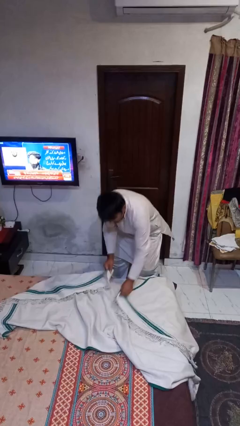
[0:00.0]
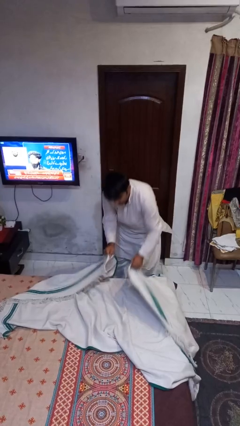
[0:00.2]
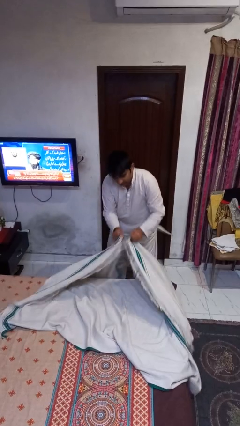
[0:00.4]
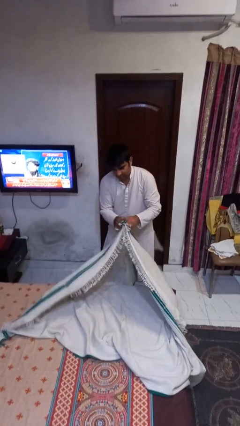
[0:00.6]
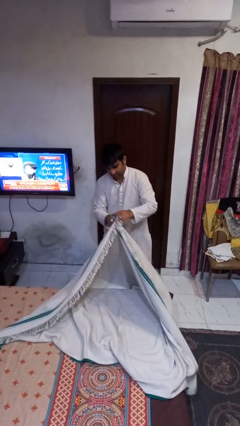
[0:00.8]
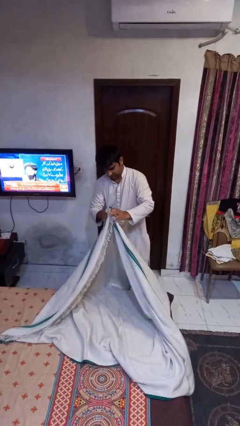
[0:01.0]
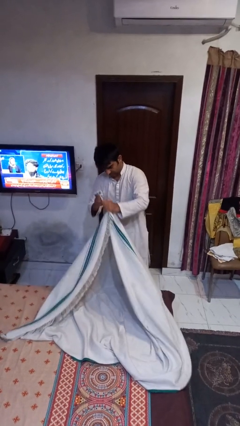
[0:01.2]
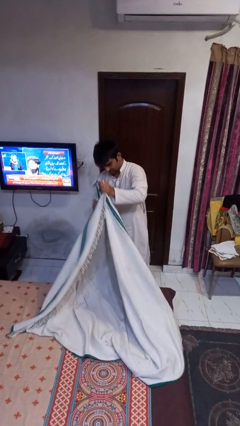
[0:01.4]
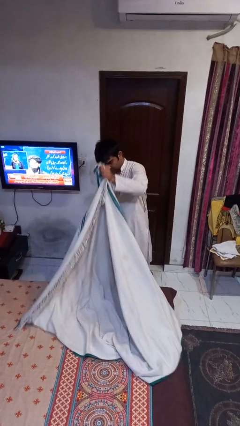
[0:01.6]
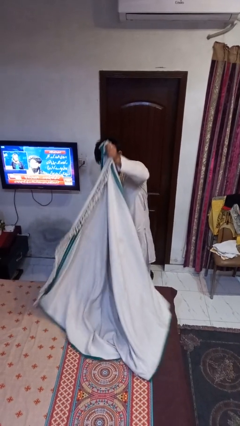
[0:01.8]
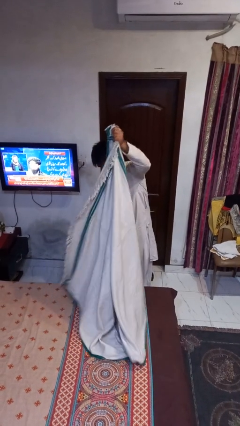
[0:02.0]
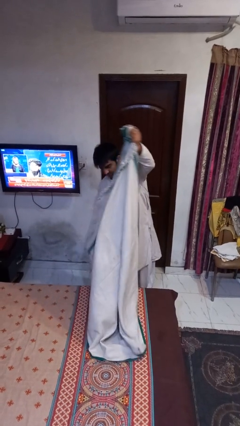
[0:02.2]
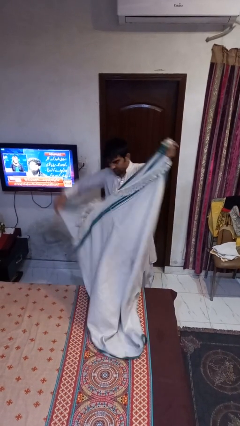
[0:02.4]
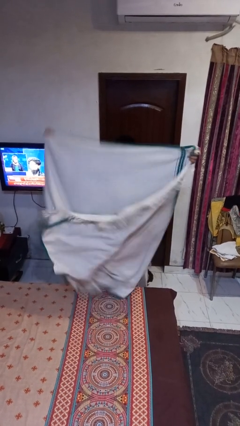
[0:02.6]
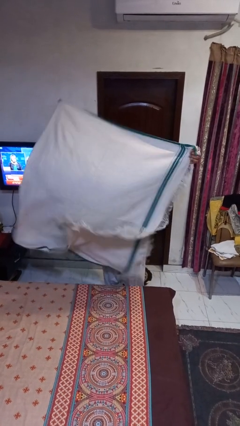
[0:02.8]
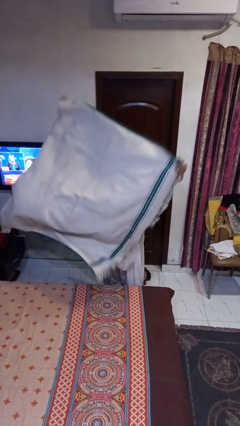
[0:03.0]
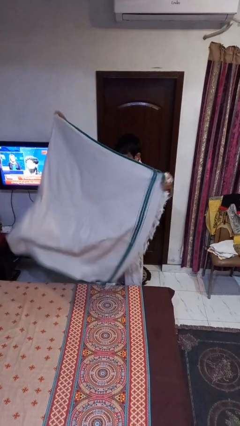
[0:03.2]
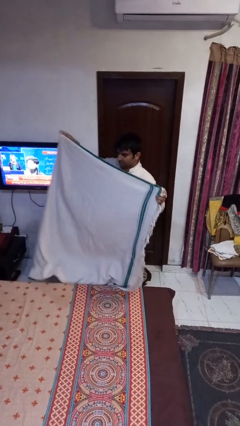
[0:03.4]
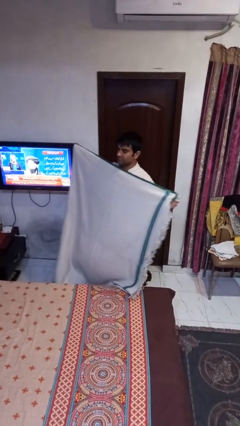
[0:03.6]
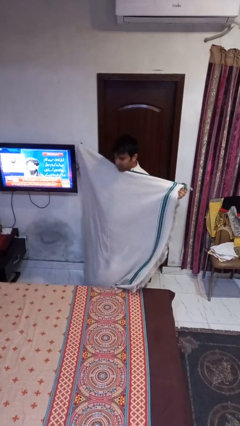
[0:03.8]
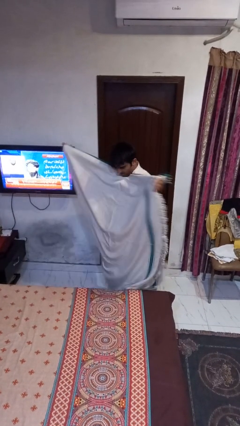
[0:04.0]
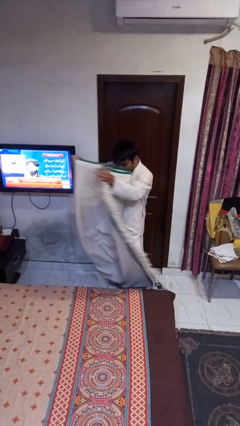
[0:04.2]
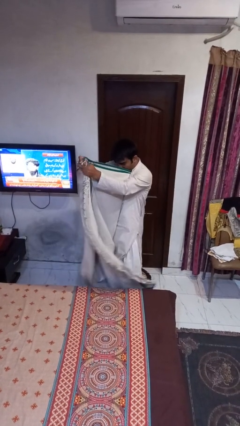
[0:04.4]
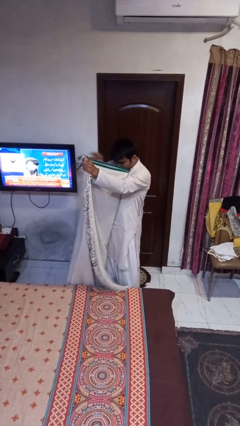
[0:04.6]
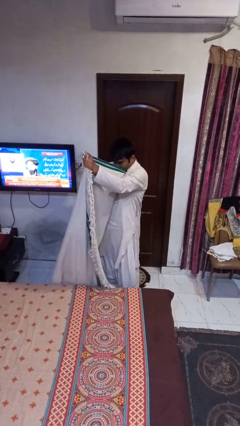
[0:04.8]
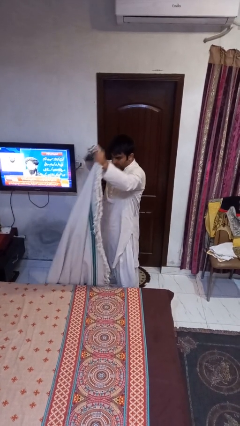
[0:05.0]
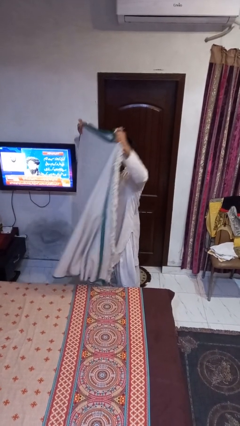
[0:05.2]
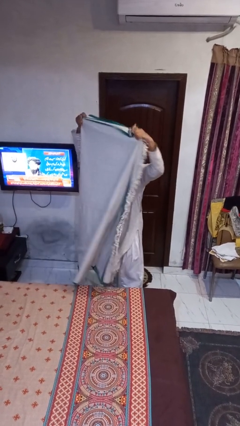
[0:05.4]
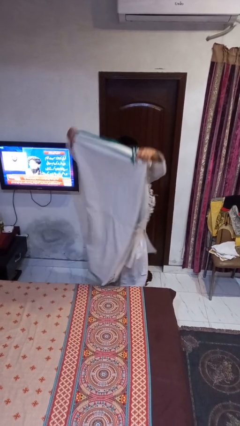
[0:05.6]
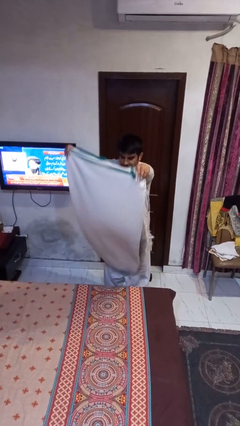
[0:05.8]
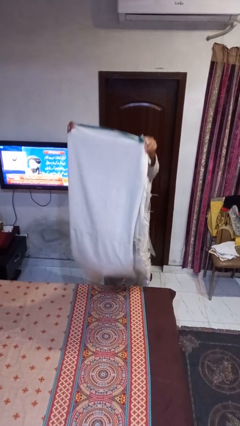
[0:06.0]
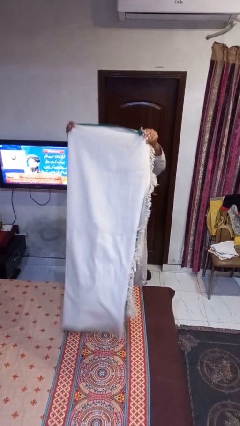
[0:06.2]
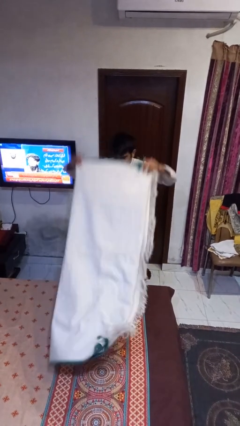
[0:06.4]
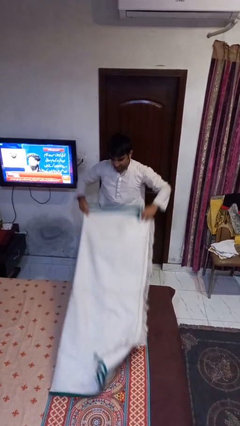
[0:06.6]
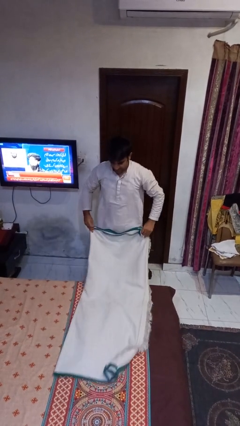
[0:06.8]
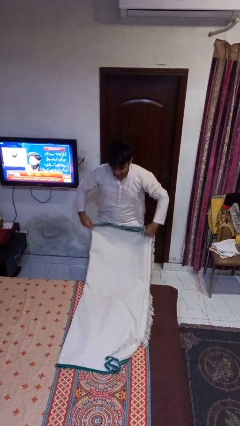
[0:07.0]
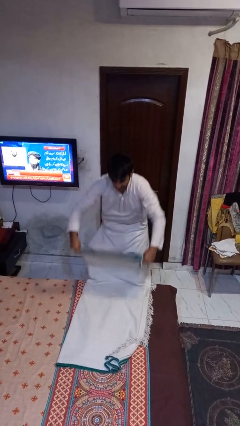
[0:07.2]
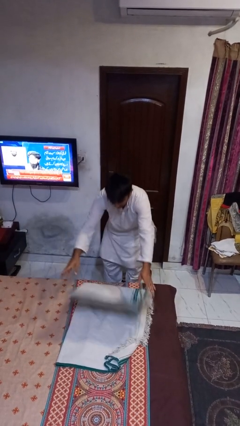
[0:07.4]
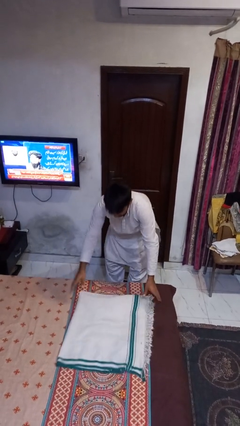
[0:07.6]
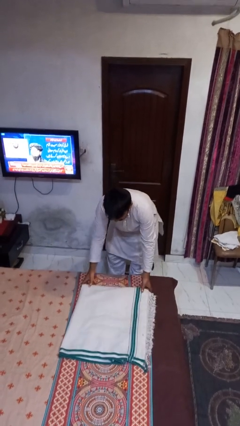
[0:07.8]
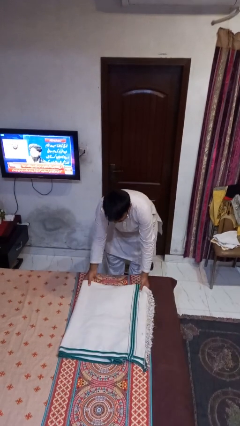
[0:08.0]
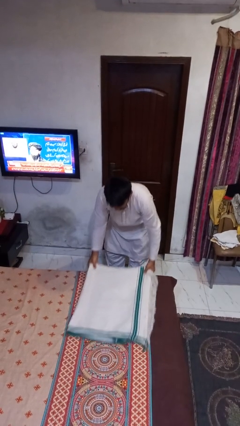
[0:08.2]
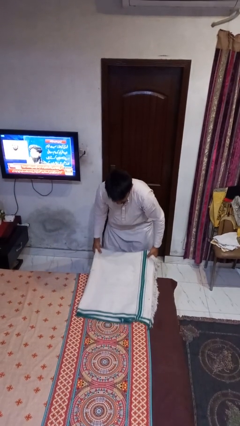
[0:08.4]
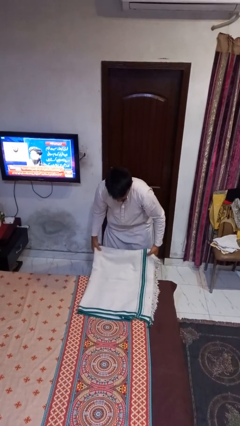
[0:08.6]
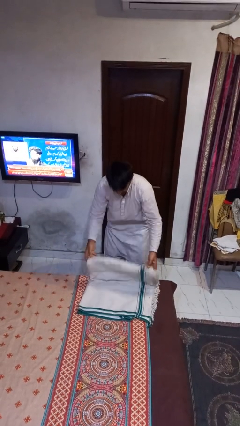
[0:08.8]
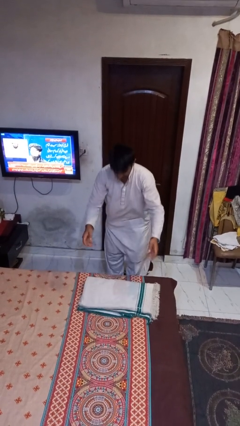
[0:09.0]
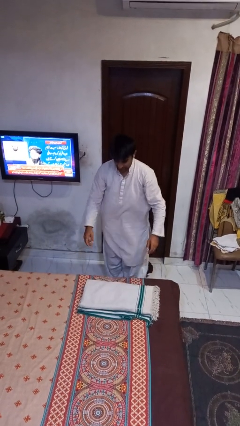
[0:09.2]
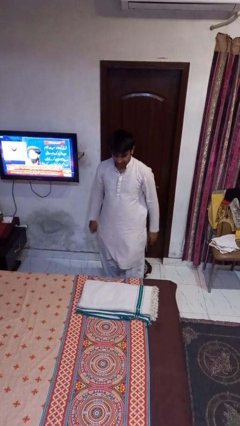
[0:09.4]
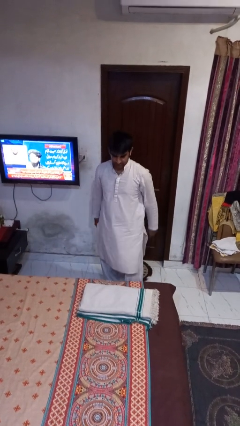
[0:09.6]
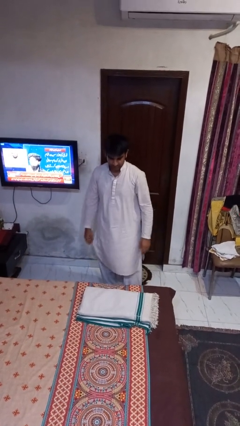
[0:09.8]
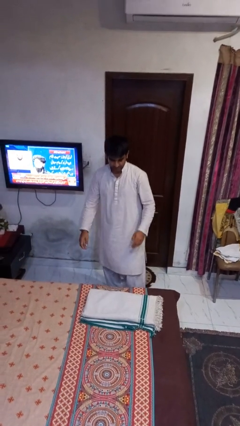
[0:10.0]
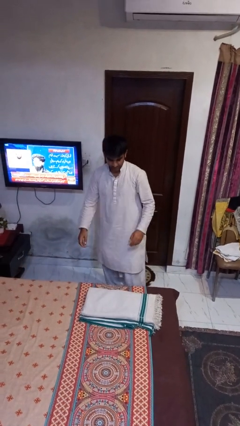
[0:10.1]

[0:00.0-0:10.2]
person folds blanket

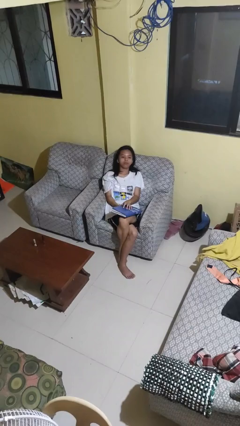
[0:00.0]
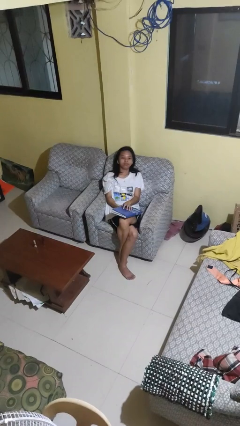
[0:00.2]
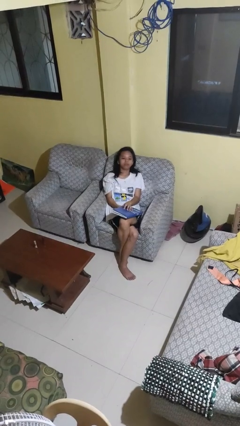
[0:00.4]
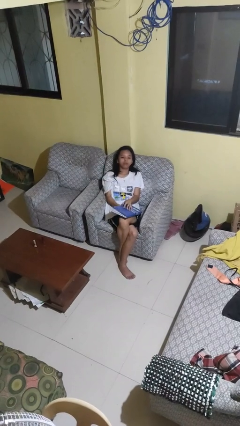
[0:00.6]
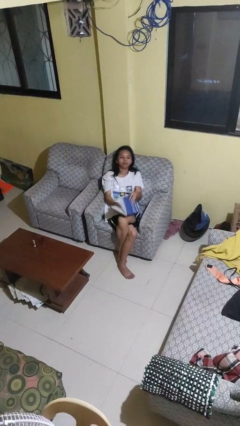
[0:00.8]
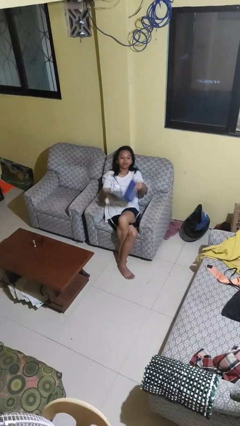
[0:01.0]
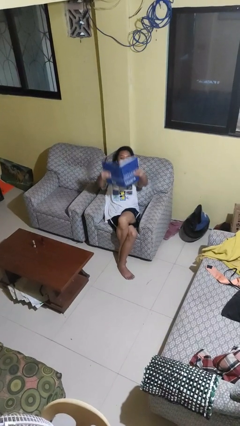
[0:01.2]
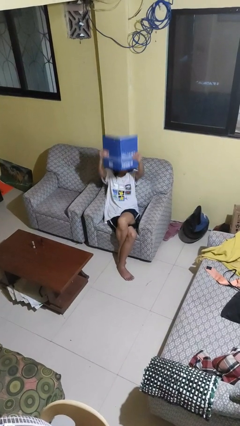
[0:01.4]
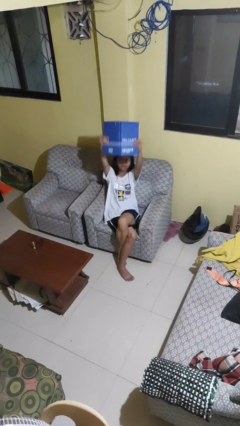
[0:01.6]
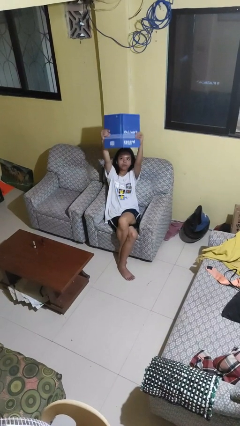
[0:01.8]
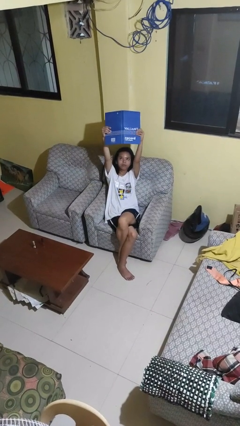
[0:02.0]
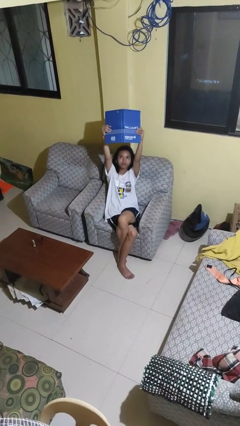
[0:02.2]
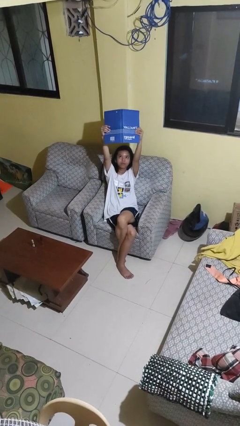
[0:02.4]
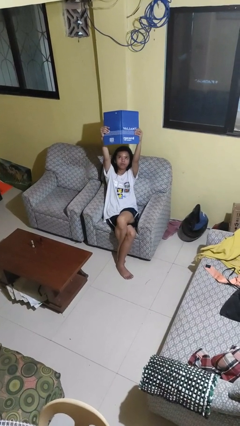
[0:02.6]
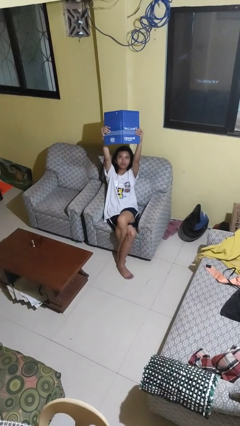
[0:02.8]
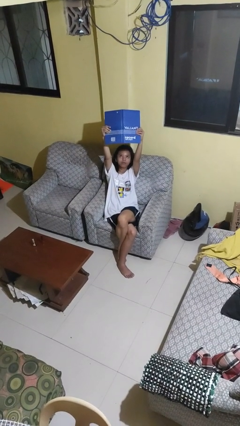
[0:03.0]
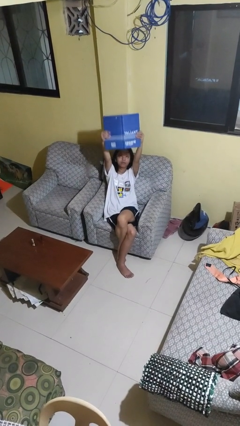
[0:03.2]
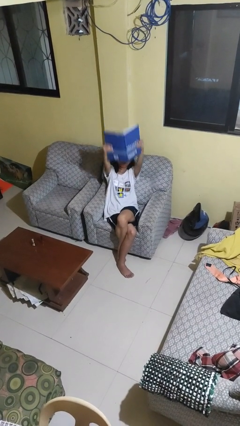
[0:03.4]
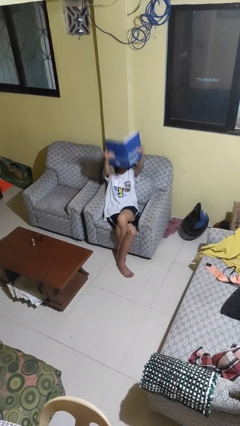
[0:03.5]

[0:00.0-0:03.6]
person holds object above head

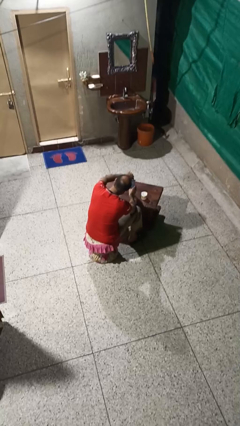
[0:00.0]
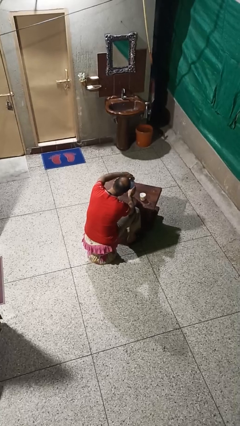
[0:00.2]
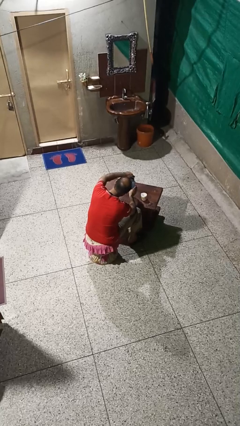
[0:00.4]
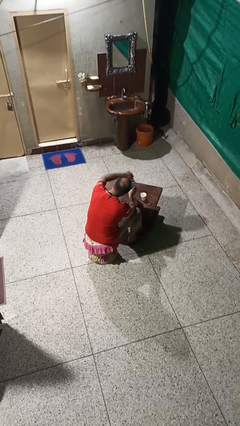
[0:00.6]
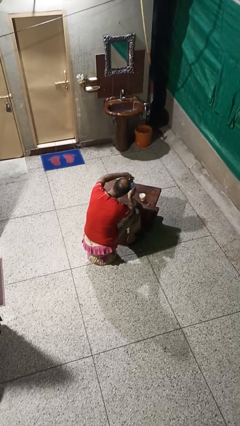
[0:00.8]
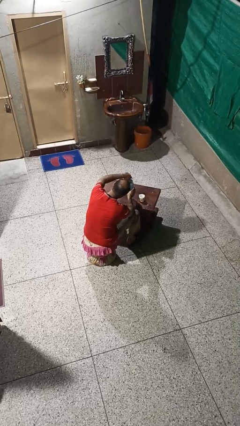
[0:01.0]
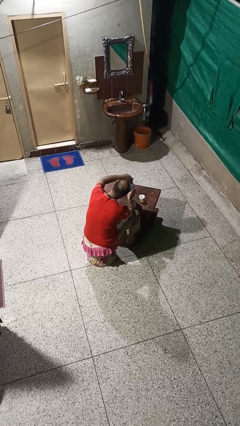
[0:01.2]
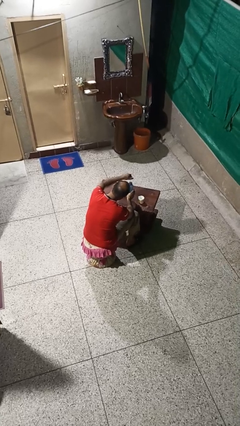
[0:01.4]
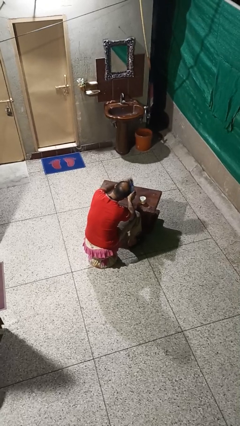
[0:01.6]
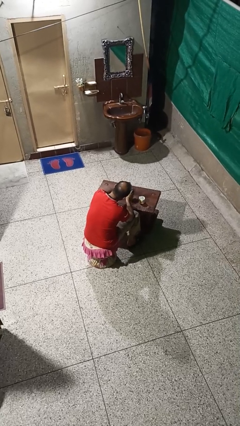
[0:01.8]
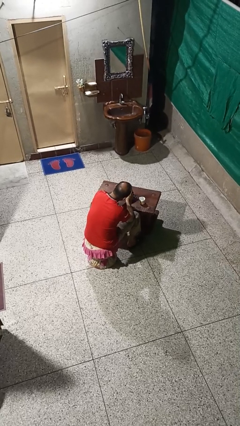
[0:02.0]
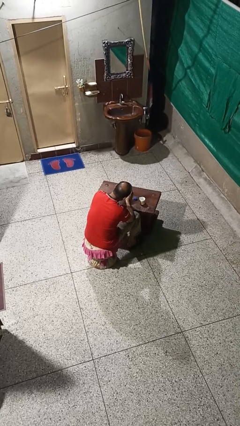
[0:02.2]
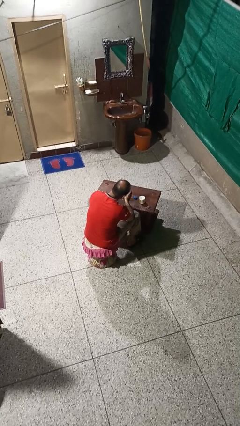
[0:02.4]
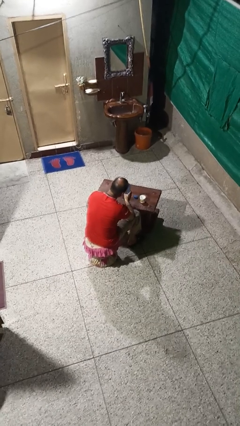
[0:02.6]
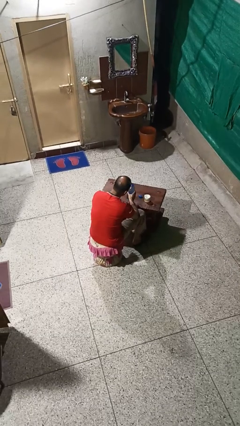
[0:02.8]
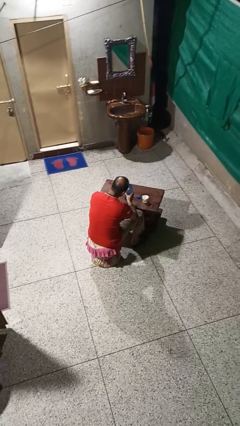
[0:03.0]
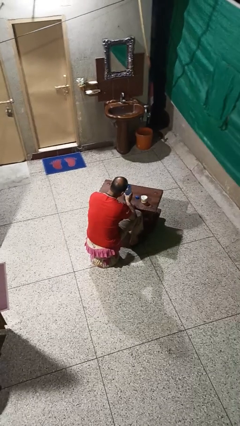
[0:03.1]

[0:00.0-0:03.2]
person unscrews lid from bottle

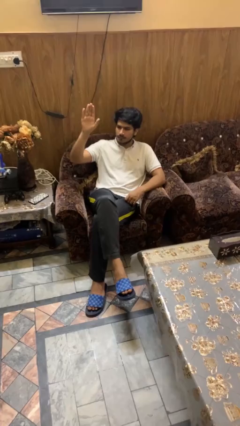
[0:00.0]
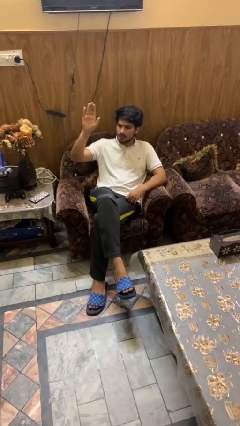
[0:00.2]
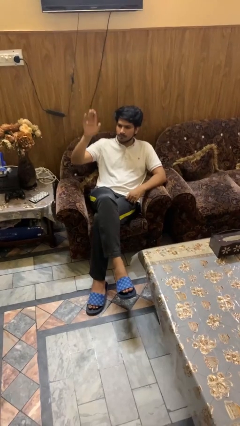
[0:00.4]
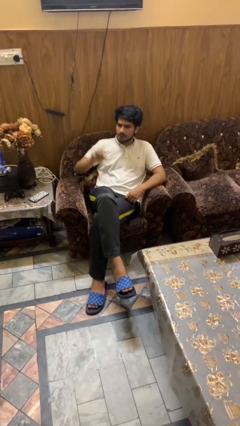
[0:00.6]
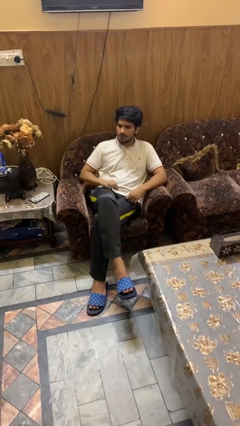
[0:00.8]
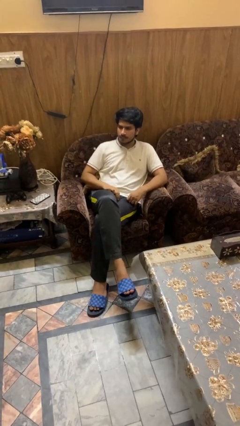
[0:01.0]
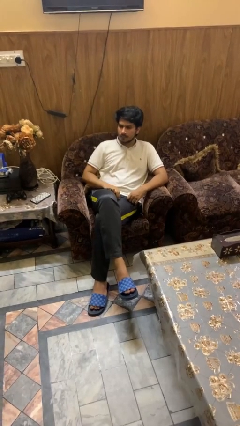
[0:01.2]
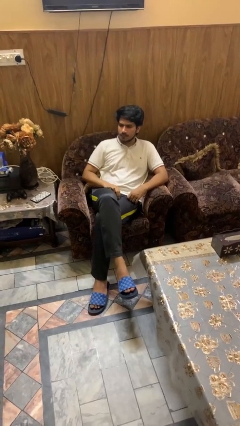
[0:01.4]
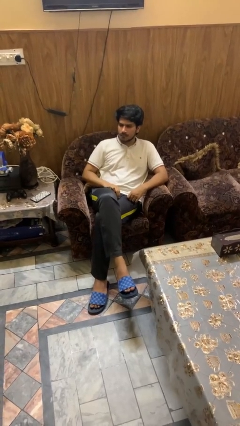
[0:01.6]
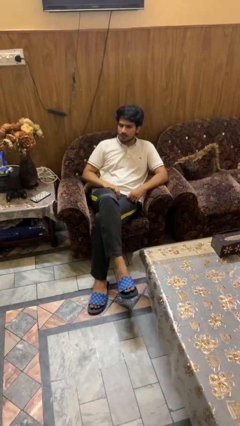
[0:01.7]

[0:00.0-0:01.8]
person gestures lower hand
